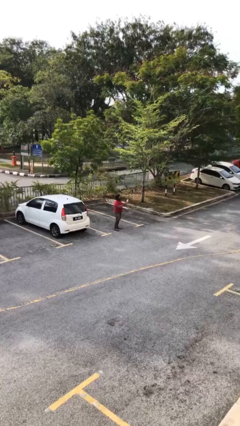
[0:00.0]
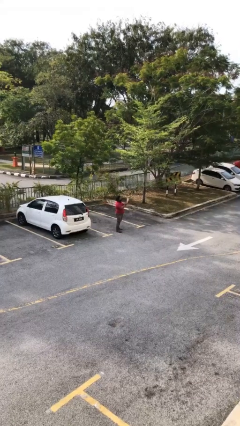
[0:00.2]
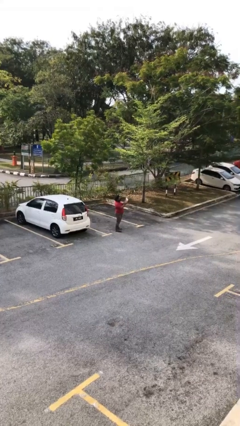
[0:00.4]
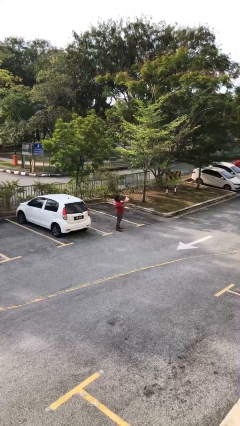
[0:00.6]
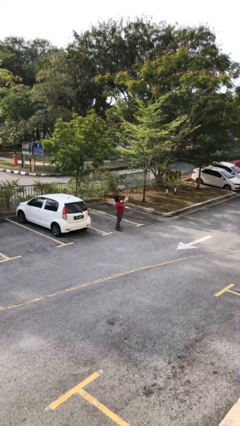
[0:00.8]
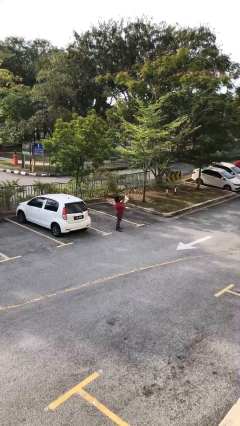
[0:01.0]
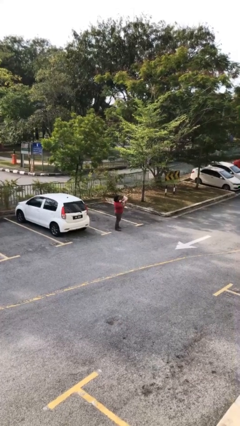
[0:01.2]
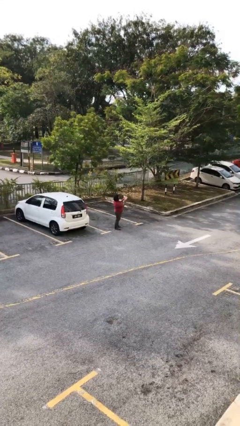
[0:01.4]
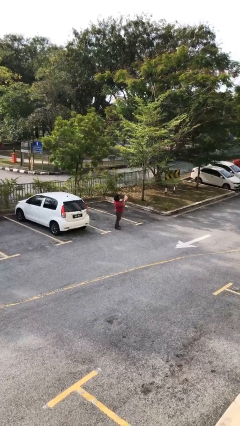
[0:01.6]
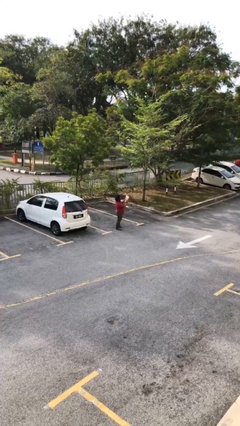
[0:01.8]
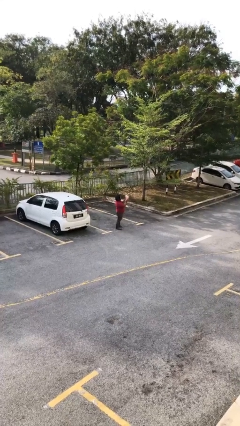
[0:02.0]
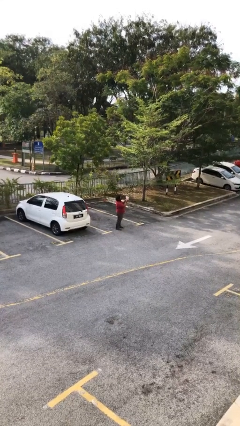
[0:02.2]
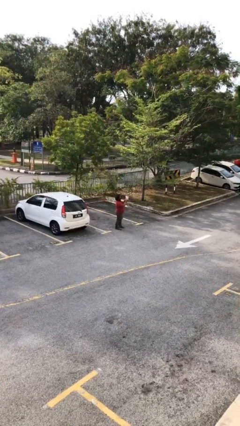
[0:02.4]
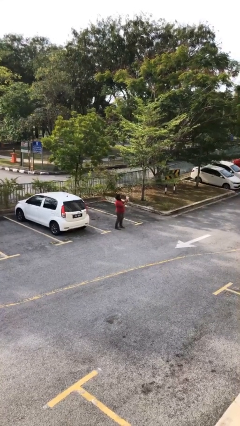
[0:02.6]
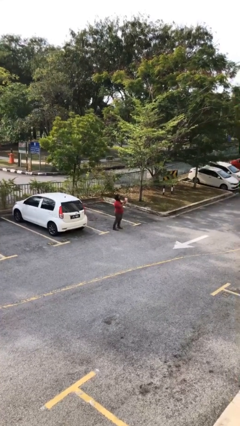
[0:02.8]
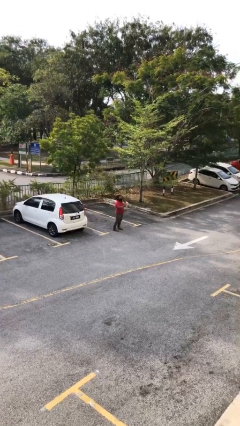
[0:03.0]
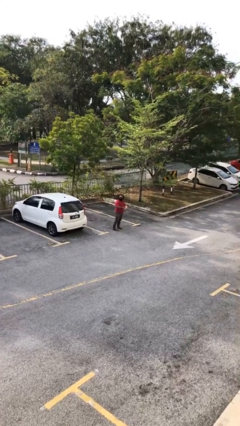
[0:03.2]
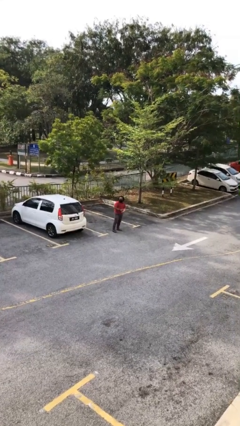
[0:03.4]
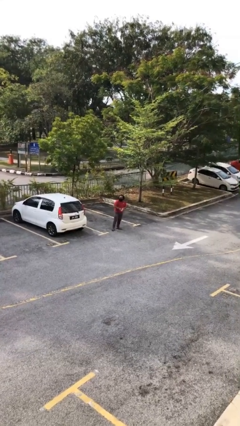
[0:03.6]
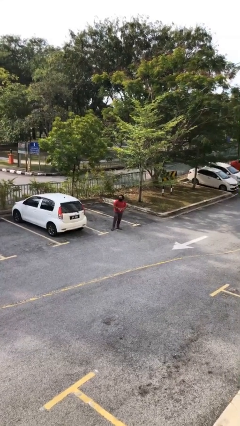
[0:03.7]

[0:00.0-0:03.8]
person reads document

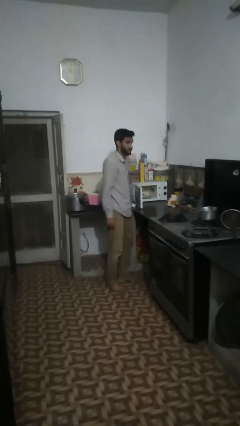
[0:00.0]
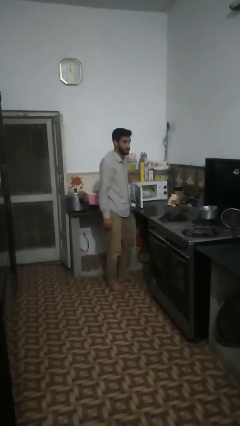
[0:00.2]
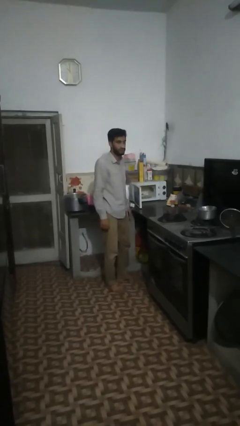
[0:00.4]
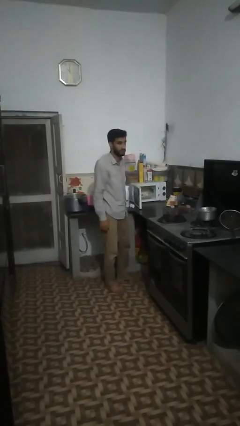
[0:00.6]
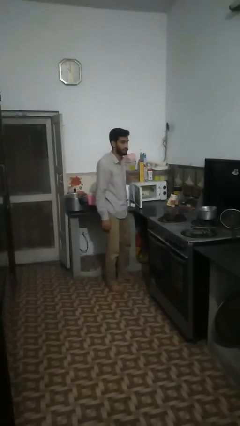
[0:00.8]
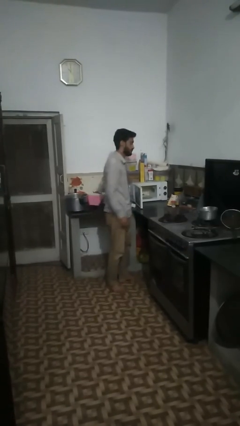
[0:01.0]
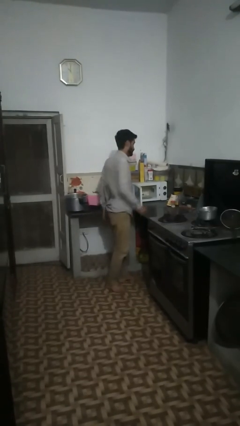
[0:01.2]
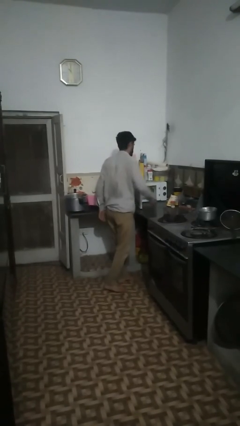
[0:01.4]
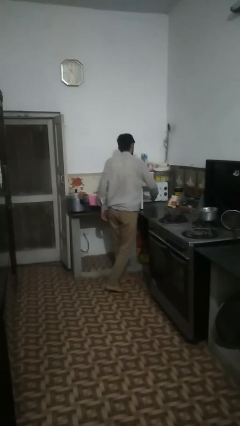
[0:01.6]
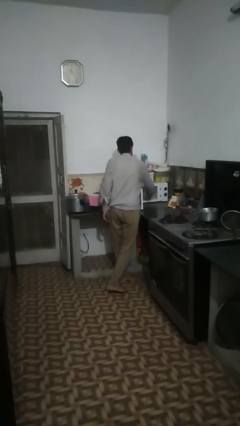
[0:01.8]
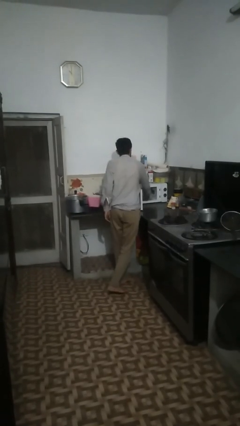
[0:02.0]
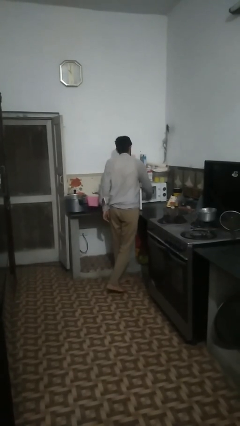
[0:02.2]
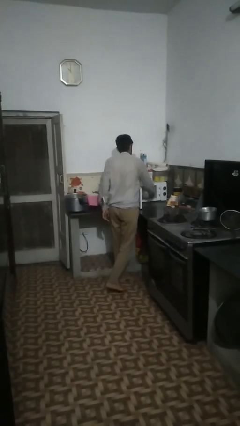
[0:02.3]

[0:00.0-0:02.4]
person takes object from microwave

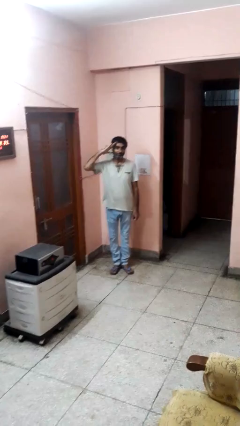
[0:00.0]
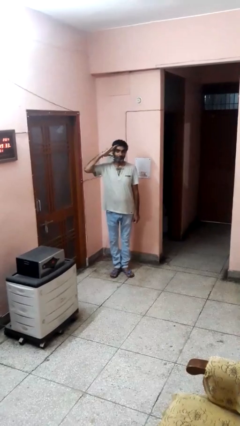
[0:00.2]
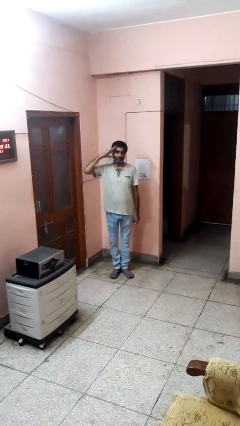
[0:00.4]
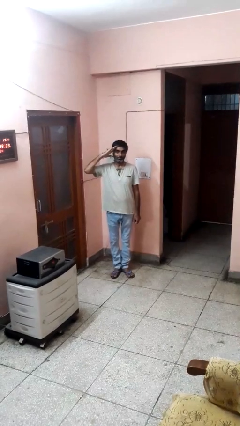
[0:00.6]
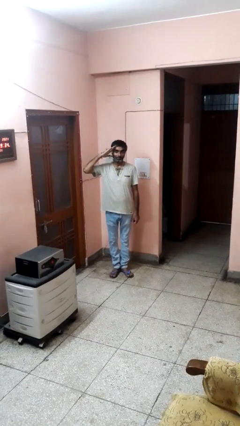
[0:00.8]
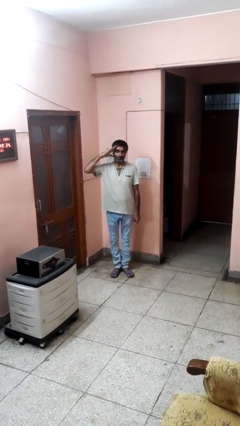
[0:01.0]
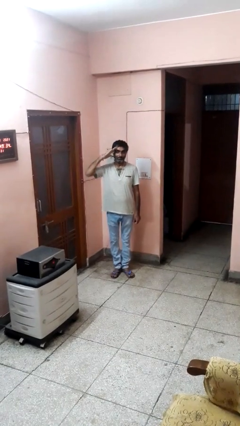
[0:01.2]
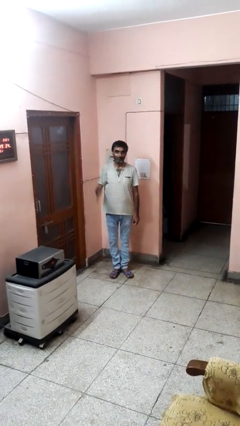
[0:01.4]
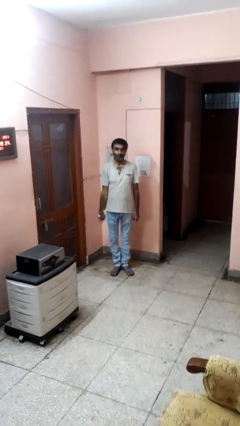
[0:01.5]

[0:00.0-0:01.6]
person salutes

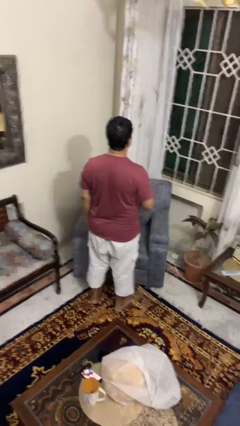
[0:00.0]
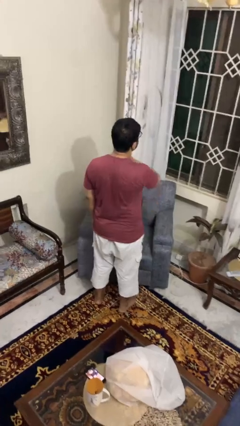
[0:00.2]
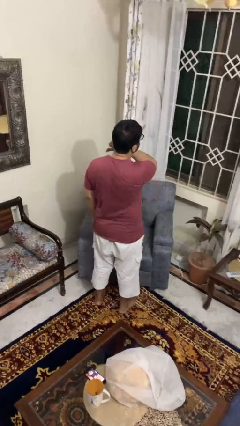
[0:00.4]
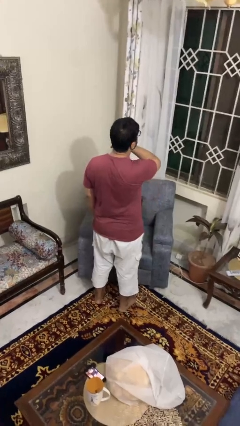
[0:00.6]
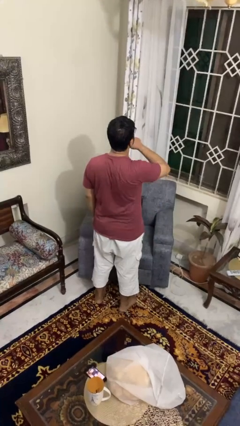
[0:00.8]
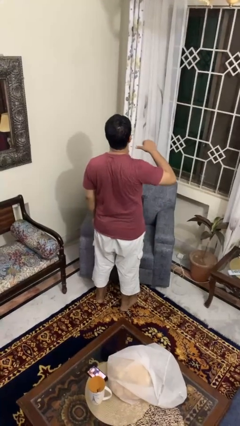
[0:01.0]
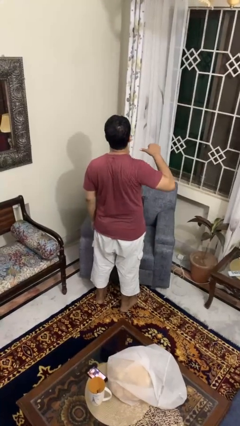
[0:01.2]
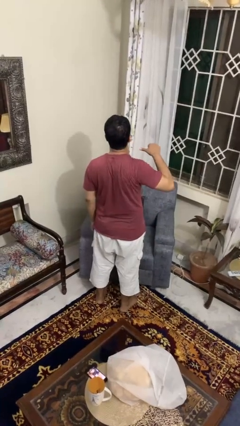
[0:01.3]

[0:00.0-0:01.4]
person gestures cut

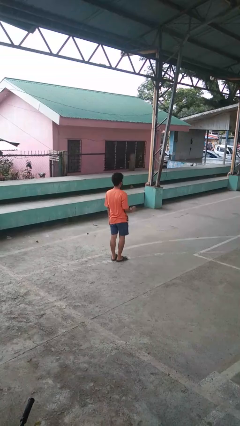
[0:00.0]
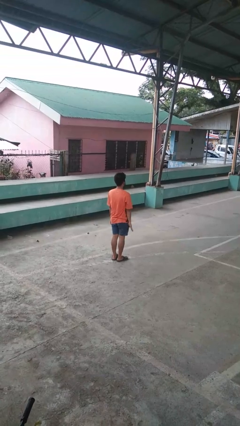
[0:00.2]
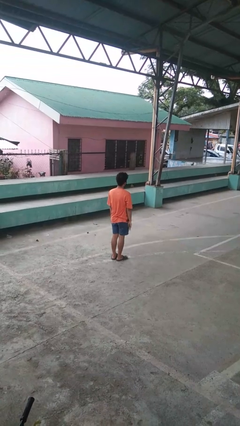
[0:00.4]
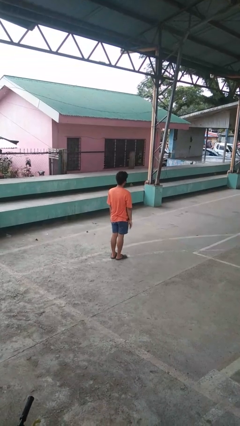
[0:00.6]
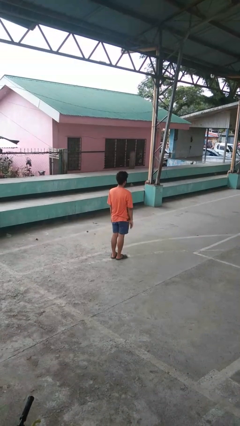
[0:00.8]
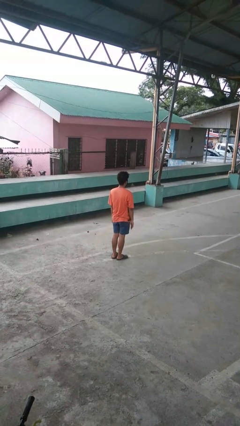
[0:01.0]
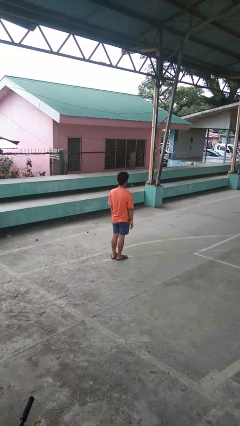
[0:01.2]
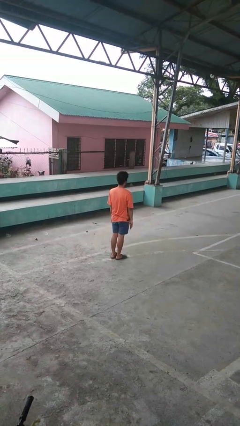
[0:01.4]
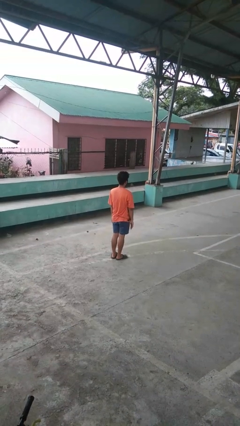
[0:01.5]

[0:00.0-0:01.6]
person gestures lower hand

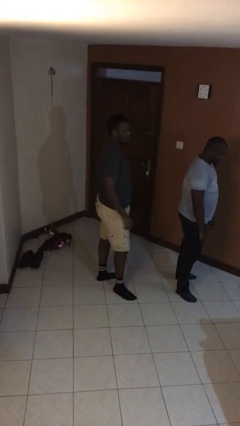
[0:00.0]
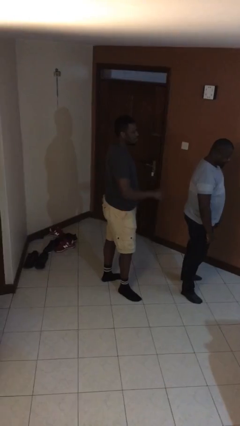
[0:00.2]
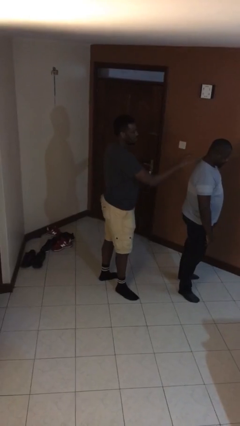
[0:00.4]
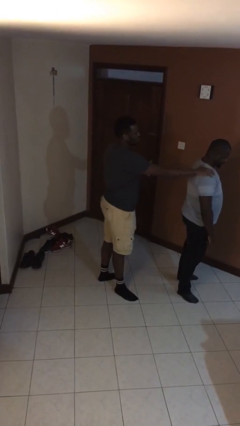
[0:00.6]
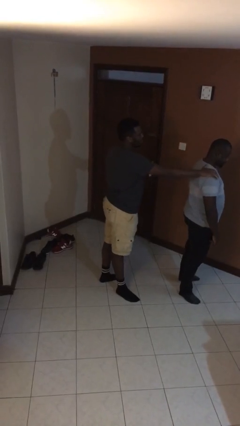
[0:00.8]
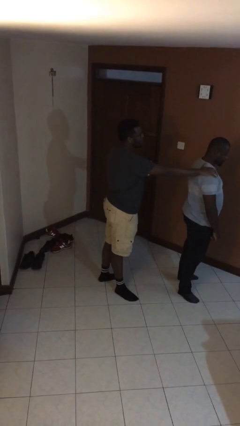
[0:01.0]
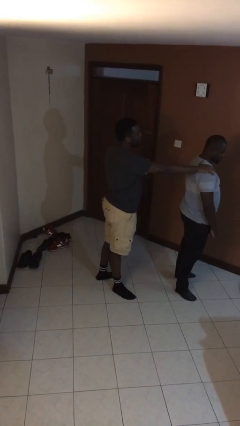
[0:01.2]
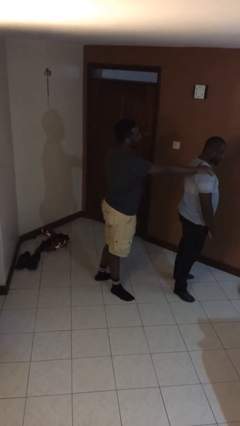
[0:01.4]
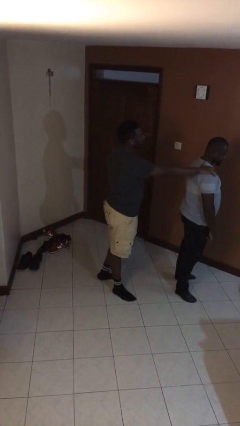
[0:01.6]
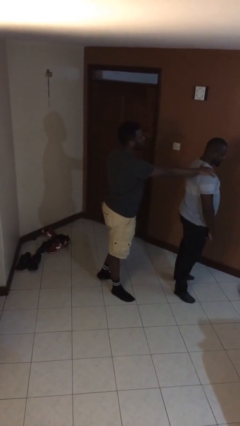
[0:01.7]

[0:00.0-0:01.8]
person grabs person by shoulder

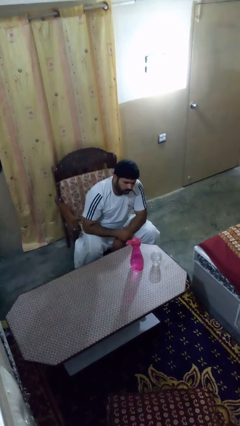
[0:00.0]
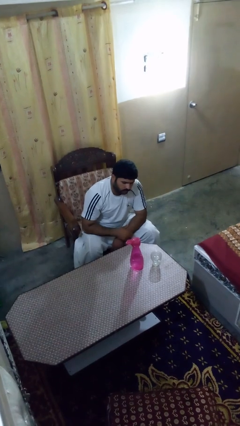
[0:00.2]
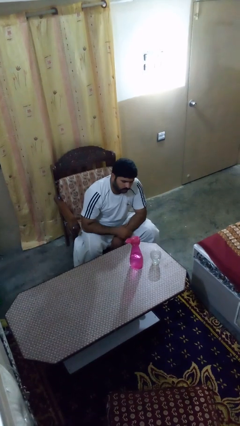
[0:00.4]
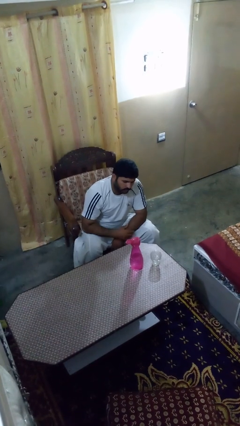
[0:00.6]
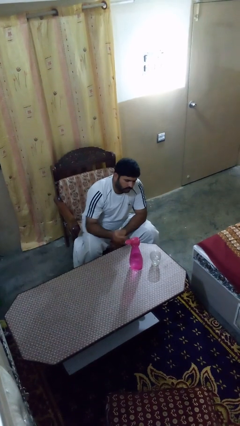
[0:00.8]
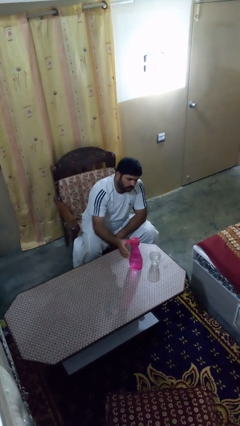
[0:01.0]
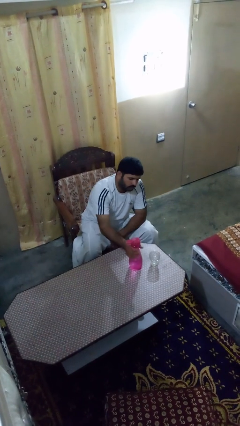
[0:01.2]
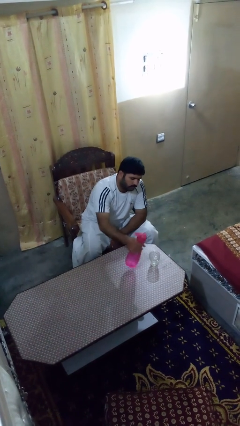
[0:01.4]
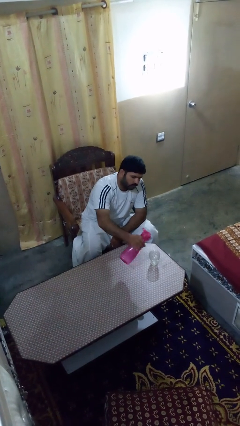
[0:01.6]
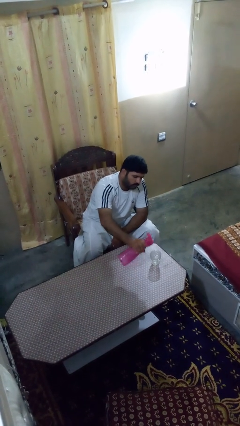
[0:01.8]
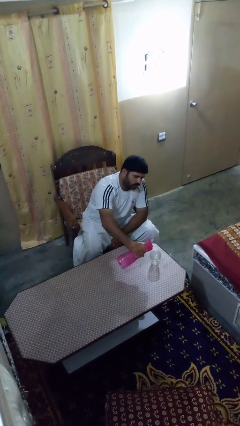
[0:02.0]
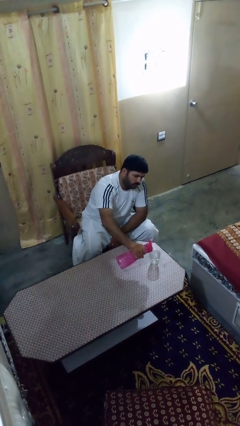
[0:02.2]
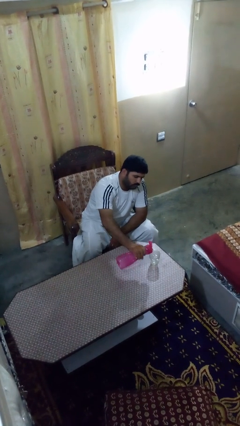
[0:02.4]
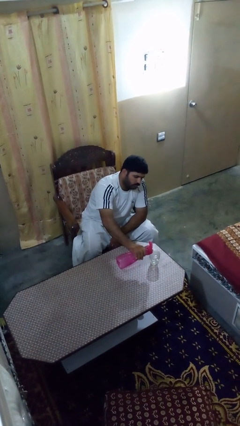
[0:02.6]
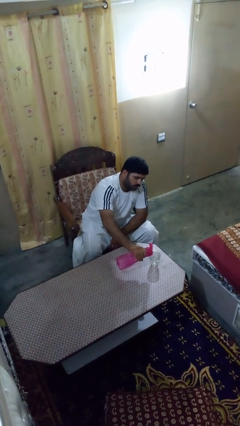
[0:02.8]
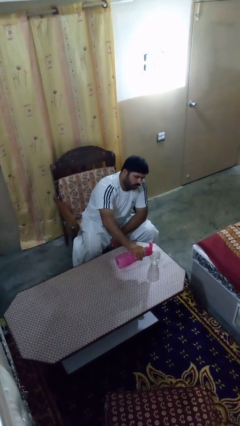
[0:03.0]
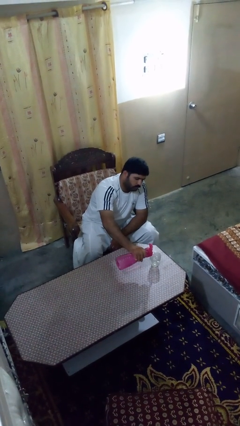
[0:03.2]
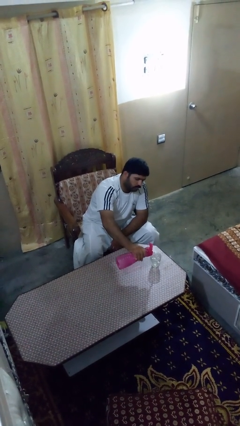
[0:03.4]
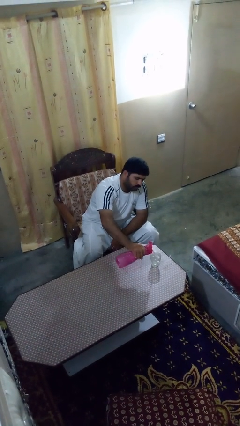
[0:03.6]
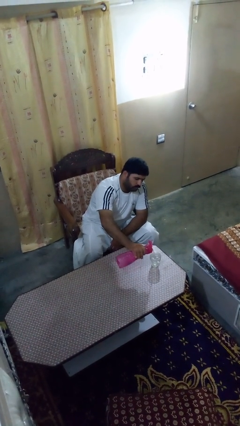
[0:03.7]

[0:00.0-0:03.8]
person pours liquid into cup

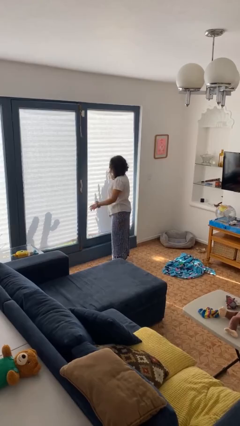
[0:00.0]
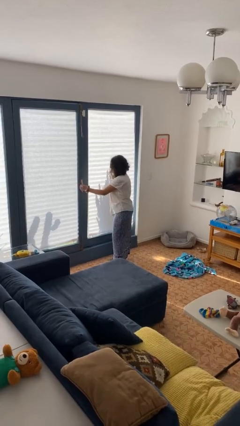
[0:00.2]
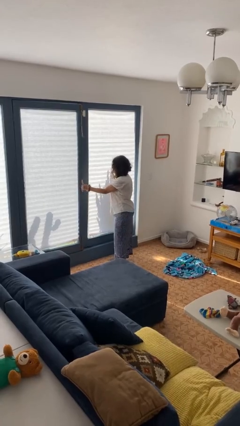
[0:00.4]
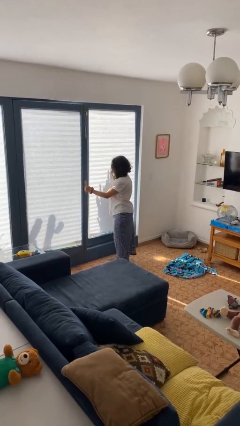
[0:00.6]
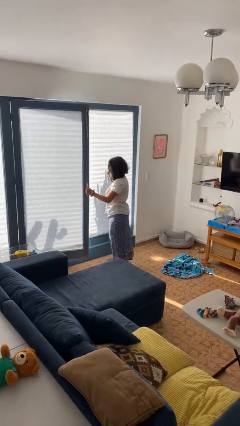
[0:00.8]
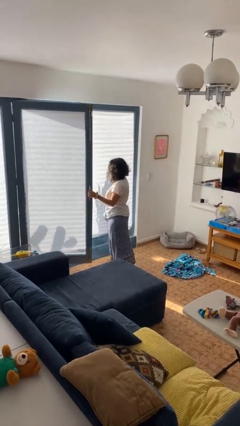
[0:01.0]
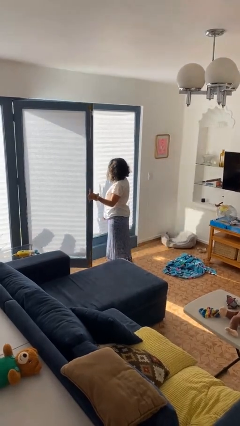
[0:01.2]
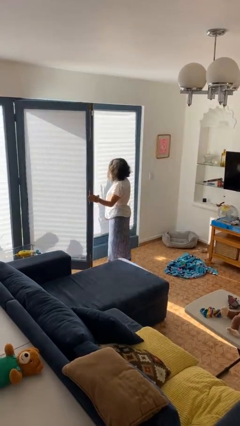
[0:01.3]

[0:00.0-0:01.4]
person opens home window
